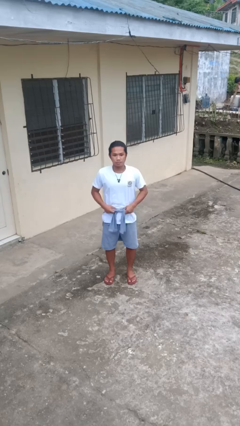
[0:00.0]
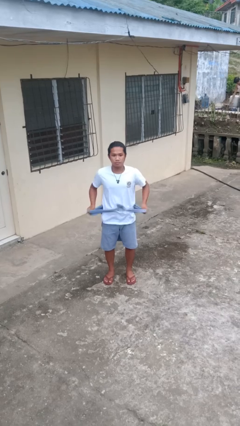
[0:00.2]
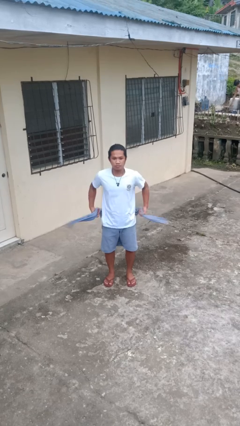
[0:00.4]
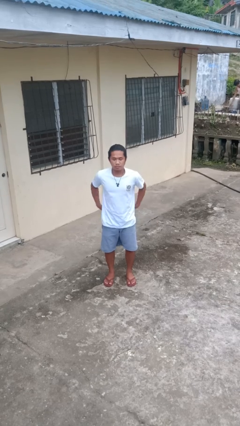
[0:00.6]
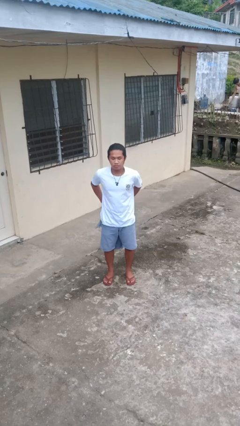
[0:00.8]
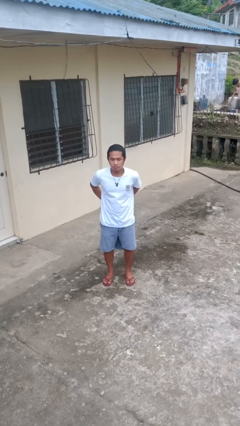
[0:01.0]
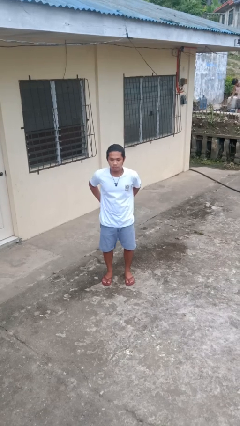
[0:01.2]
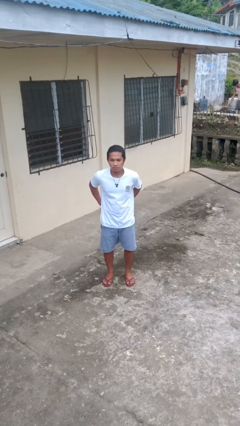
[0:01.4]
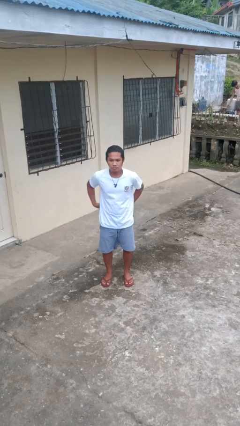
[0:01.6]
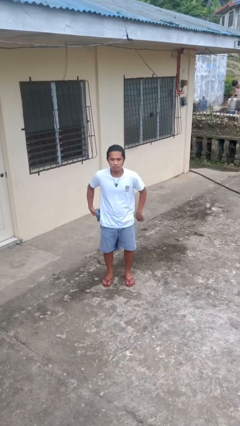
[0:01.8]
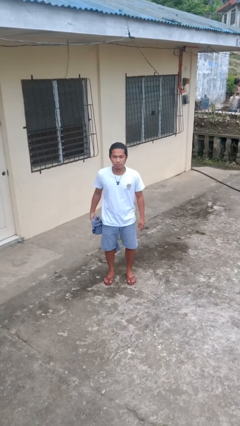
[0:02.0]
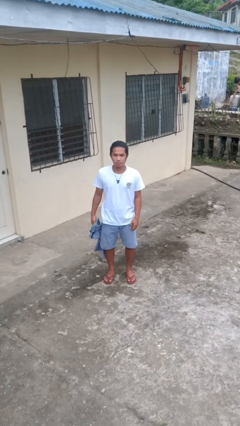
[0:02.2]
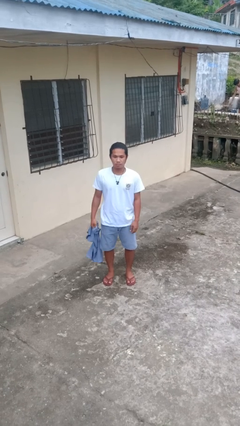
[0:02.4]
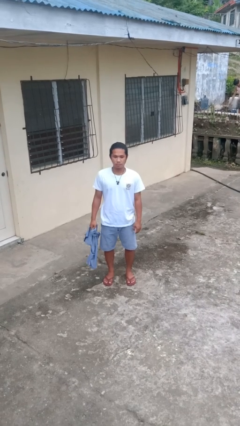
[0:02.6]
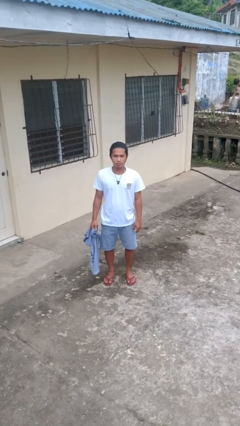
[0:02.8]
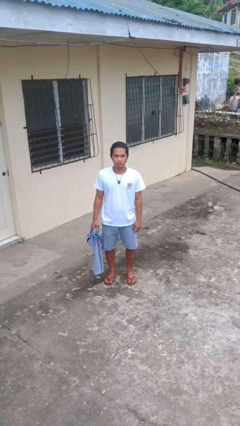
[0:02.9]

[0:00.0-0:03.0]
person unties jacket around waist

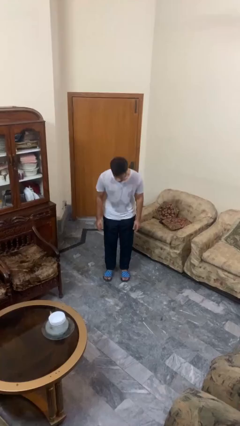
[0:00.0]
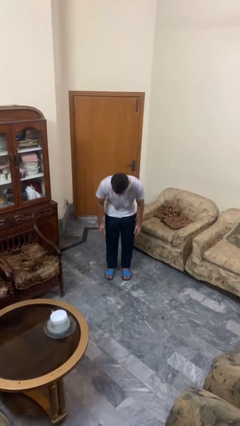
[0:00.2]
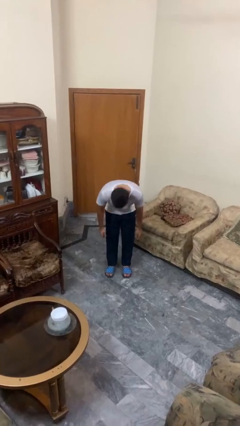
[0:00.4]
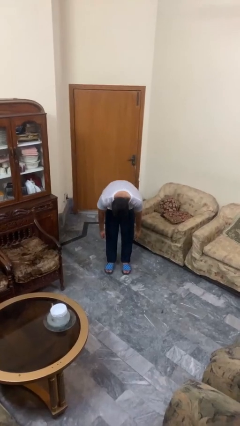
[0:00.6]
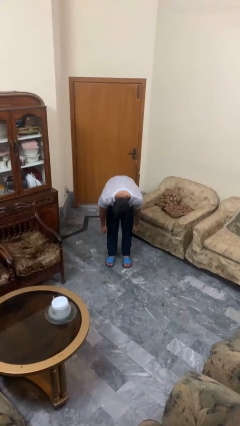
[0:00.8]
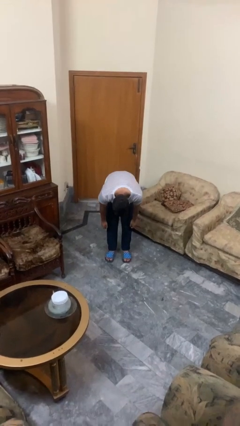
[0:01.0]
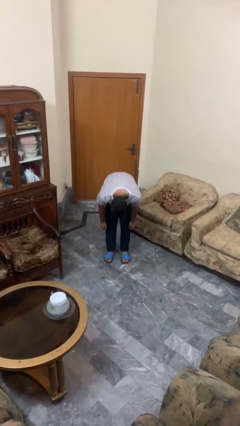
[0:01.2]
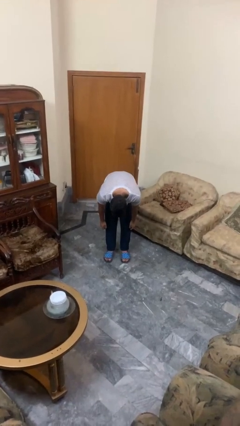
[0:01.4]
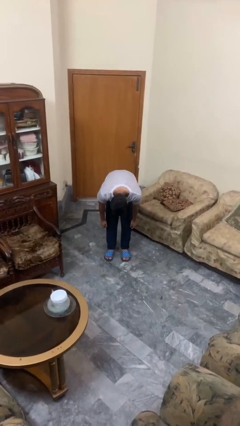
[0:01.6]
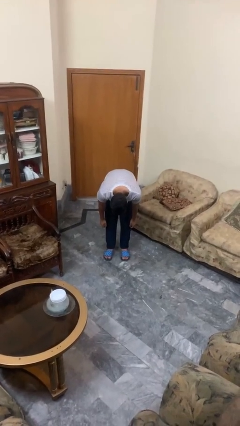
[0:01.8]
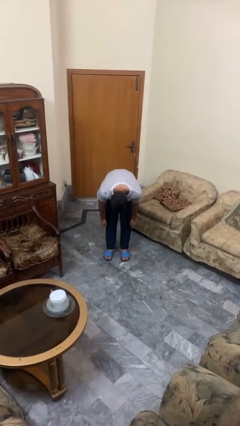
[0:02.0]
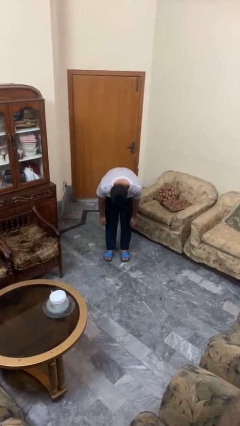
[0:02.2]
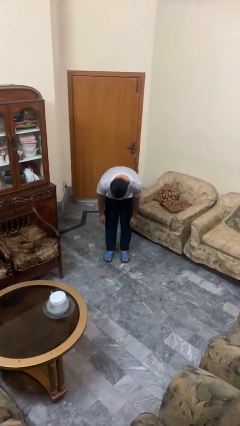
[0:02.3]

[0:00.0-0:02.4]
person bows

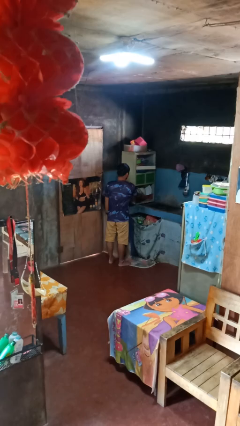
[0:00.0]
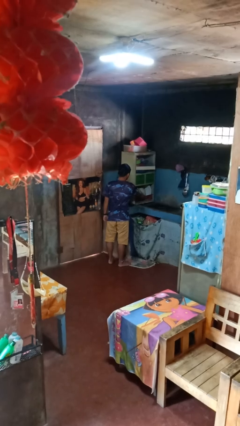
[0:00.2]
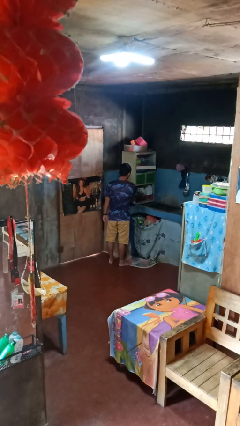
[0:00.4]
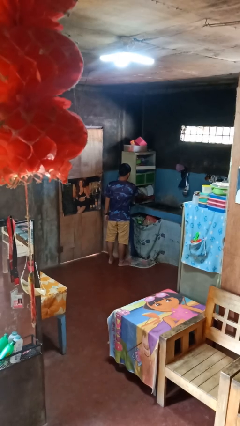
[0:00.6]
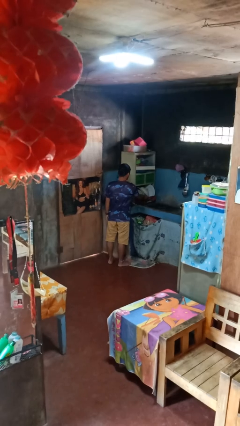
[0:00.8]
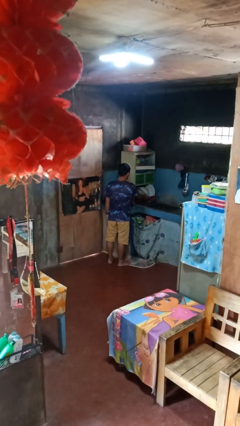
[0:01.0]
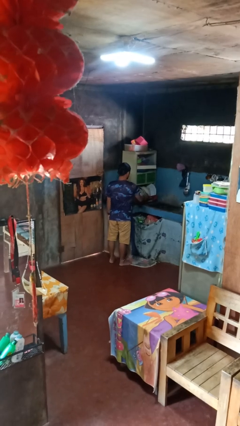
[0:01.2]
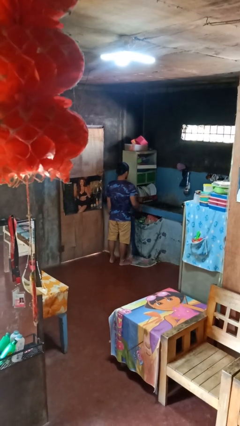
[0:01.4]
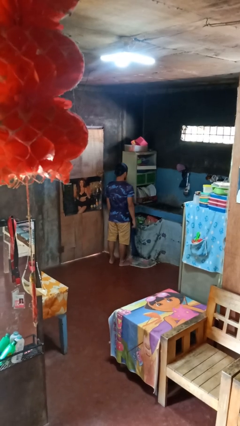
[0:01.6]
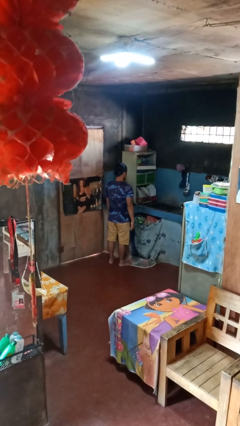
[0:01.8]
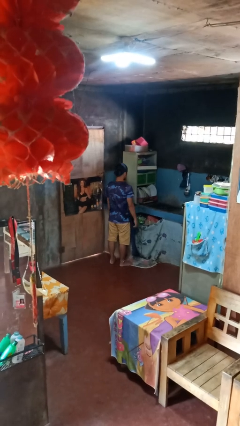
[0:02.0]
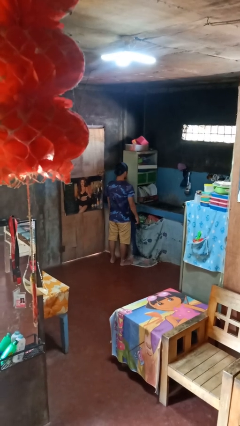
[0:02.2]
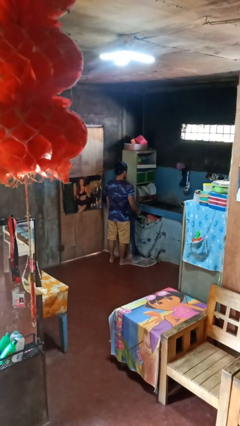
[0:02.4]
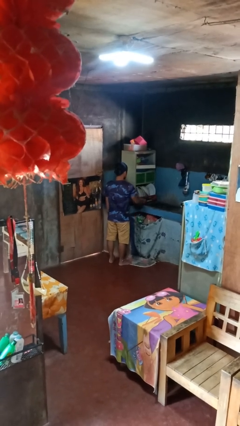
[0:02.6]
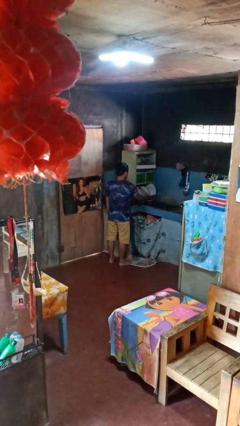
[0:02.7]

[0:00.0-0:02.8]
person opens dishwasher

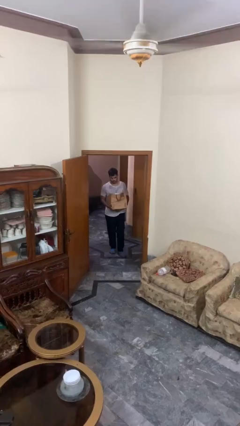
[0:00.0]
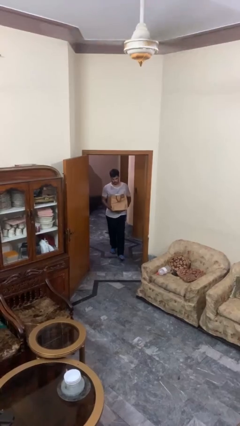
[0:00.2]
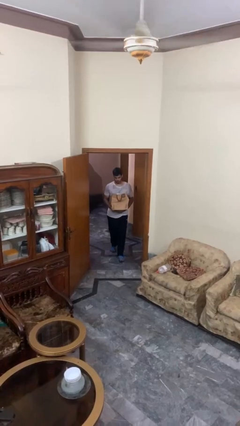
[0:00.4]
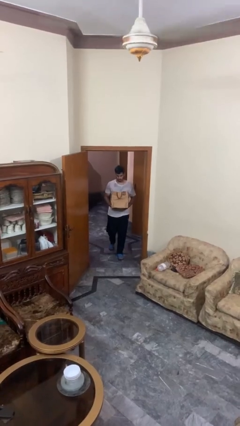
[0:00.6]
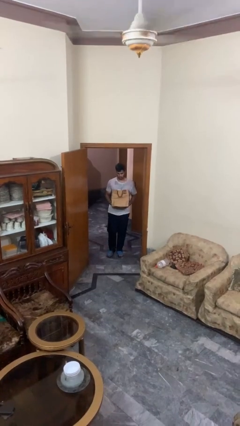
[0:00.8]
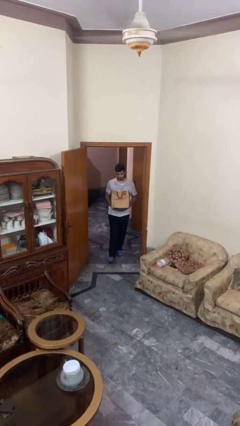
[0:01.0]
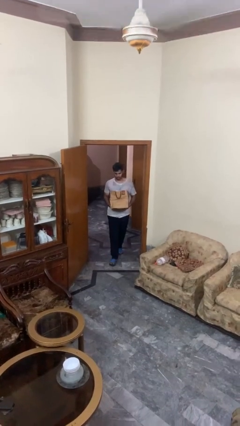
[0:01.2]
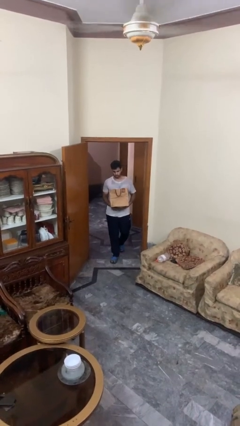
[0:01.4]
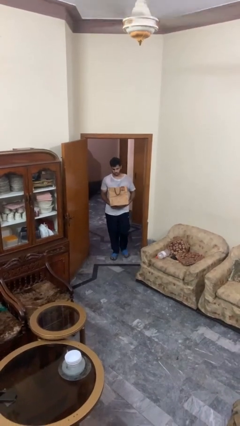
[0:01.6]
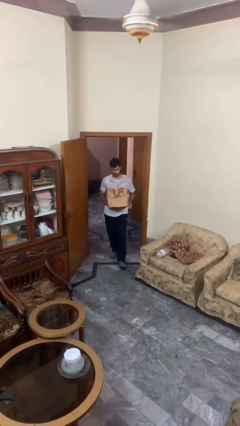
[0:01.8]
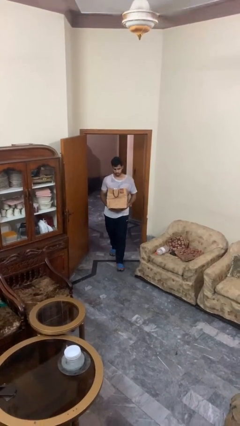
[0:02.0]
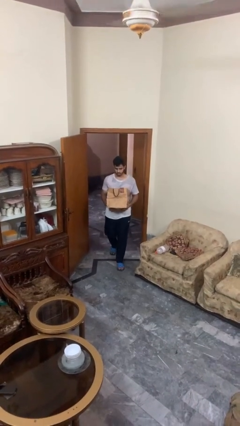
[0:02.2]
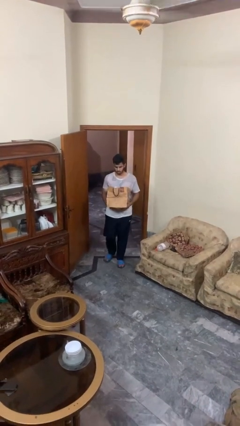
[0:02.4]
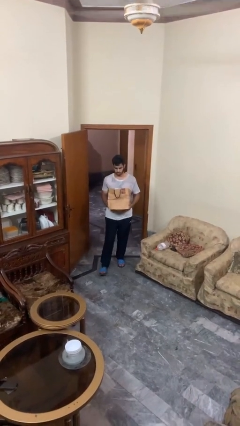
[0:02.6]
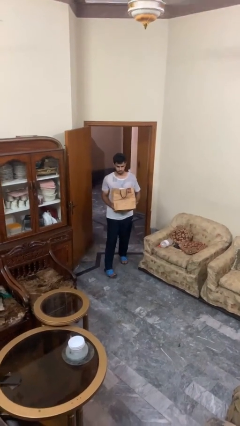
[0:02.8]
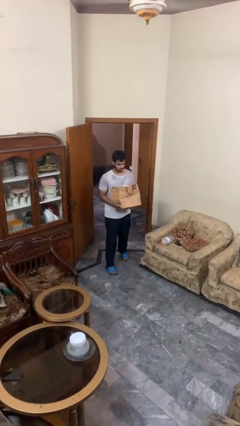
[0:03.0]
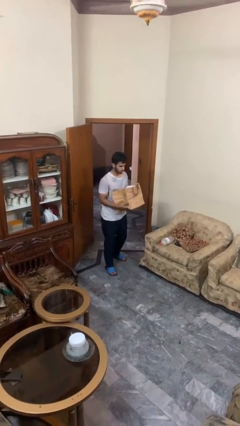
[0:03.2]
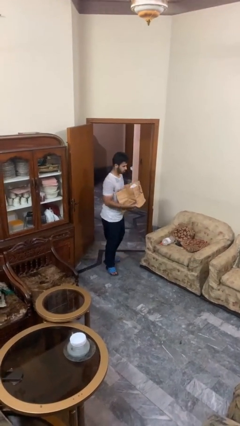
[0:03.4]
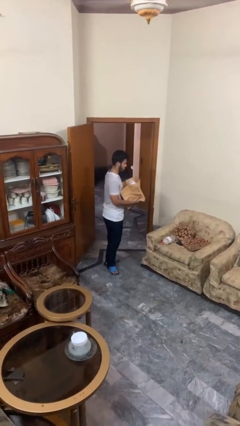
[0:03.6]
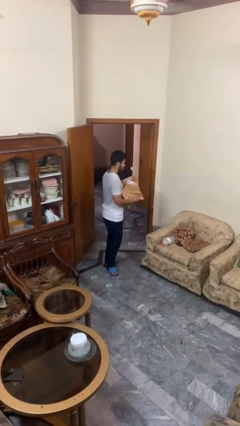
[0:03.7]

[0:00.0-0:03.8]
person carries groceries

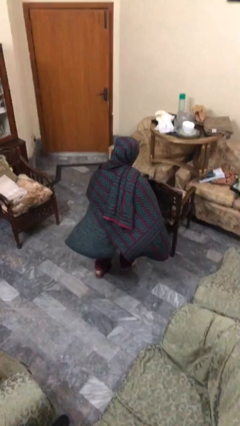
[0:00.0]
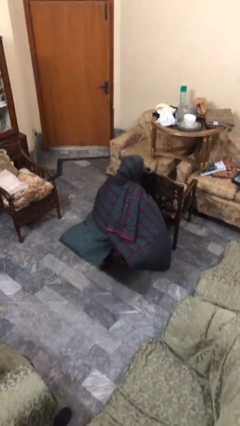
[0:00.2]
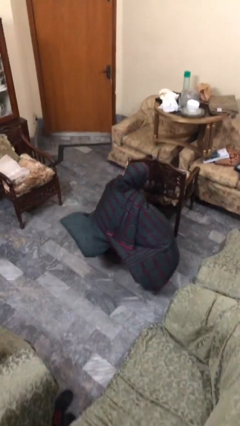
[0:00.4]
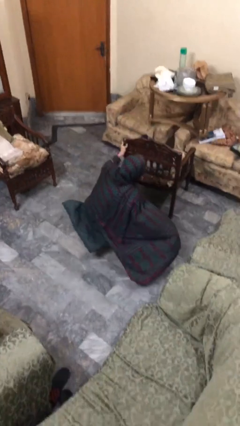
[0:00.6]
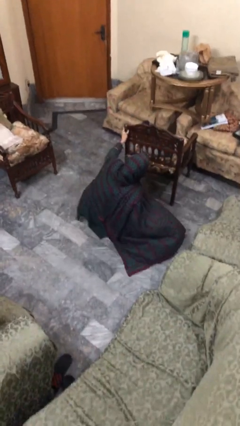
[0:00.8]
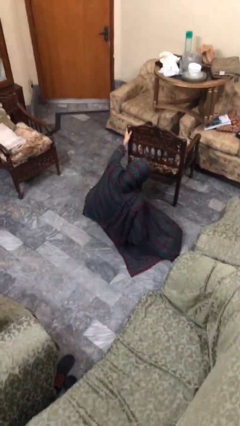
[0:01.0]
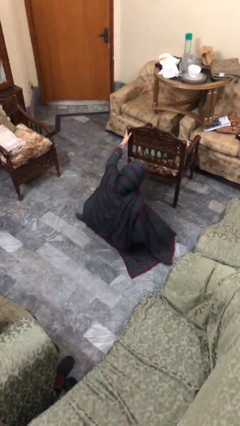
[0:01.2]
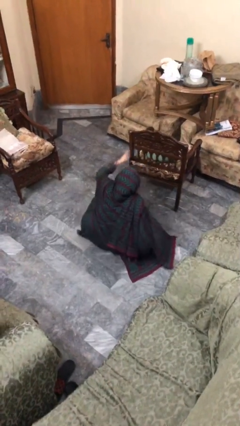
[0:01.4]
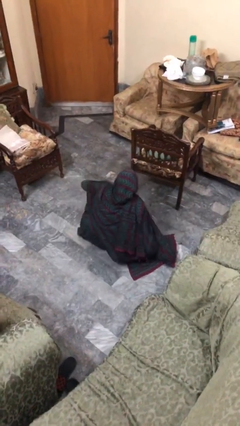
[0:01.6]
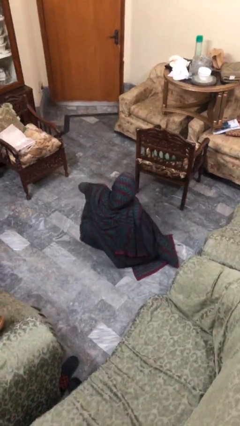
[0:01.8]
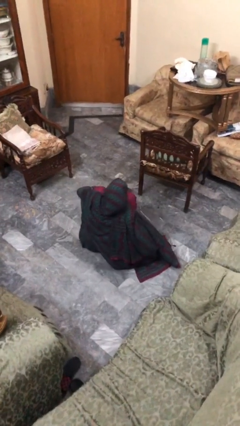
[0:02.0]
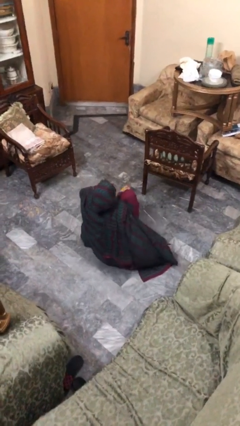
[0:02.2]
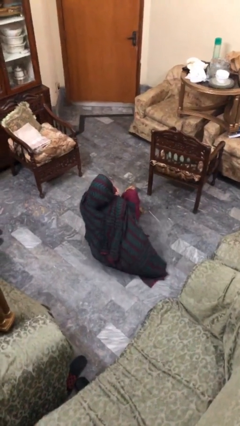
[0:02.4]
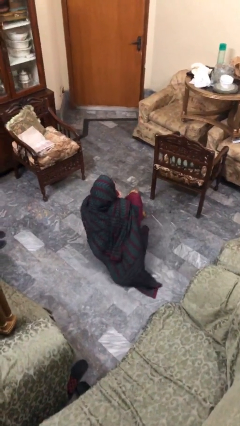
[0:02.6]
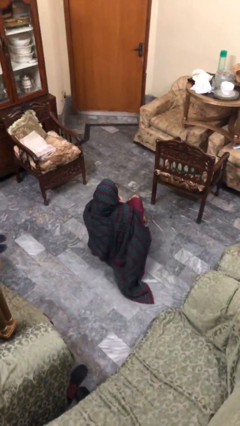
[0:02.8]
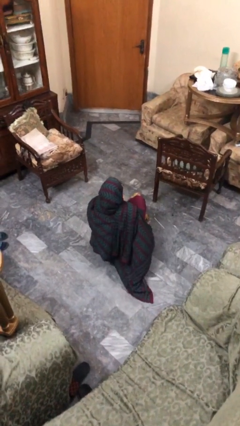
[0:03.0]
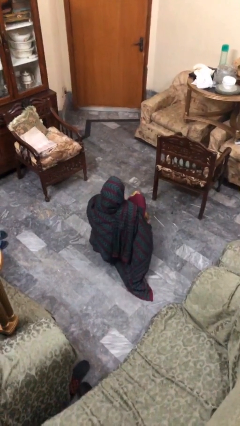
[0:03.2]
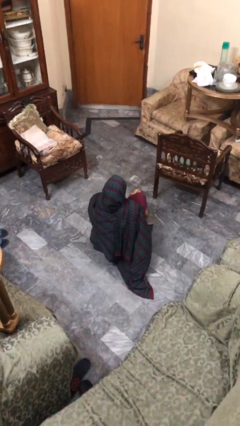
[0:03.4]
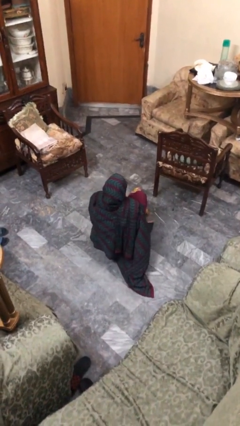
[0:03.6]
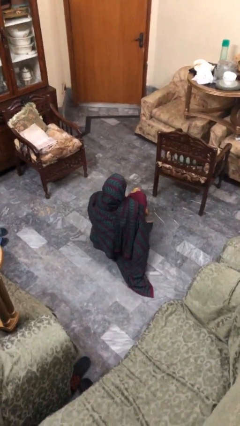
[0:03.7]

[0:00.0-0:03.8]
person sits crisscross

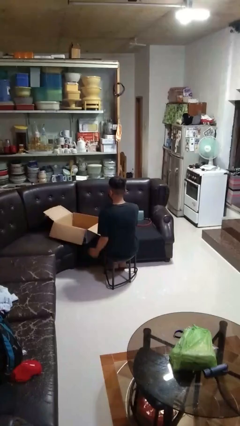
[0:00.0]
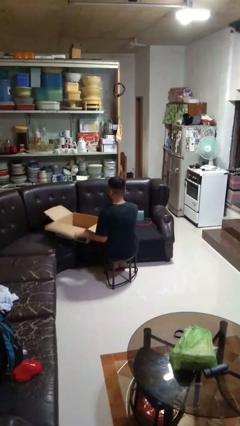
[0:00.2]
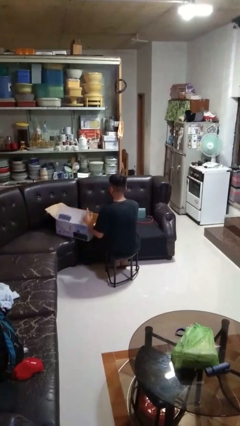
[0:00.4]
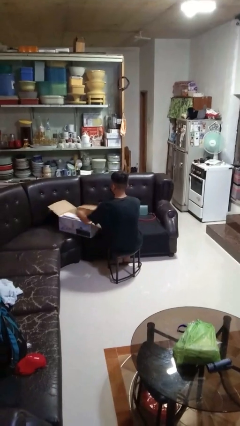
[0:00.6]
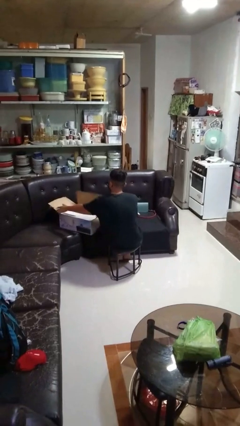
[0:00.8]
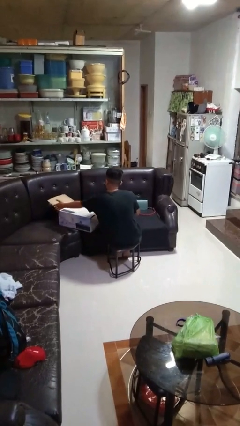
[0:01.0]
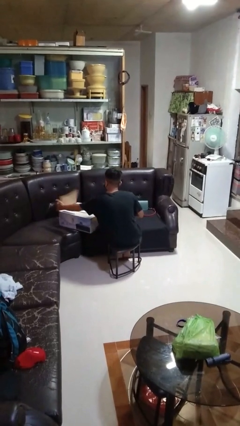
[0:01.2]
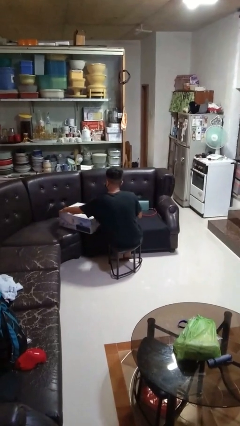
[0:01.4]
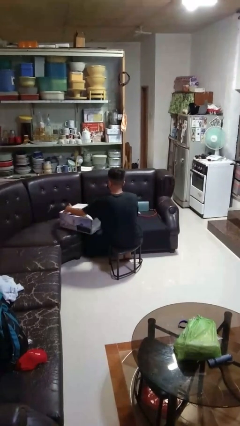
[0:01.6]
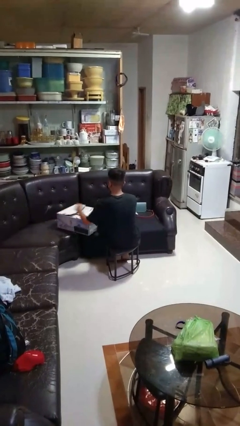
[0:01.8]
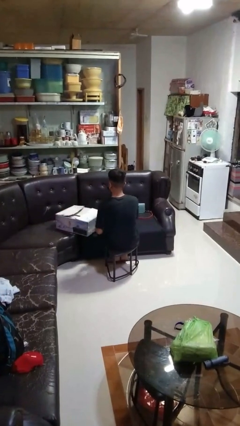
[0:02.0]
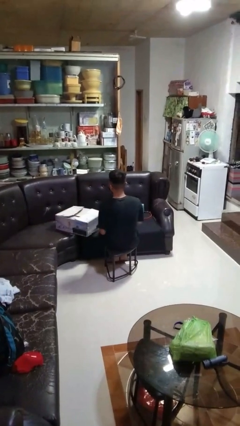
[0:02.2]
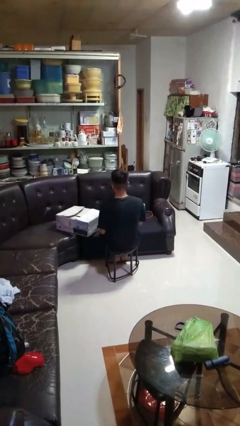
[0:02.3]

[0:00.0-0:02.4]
person closes box
